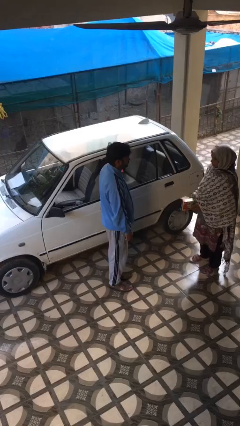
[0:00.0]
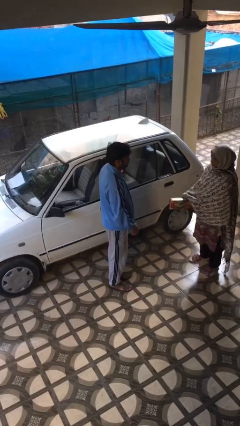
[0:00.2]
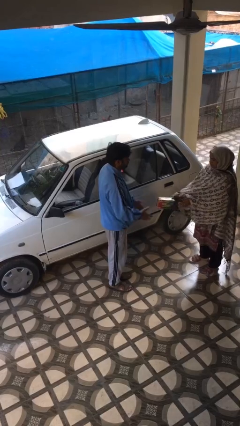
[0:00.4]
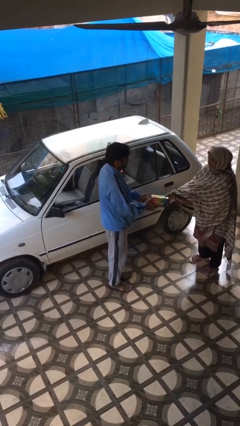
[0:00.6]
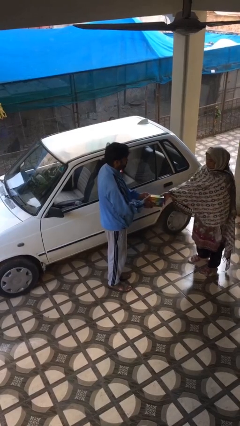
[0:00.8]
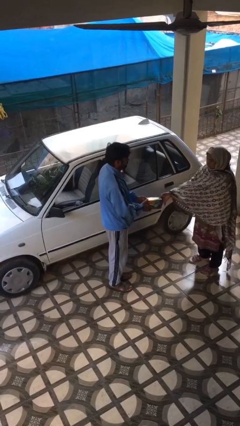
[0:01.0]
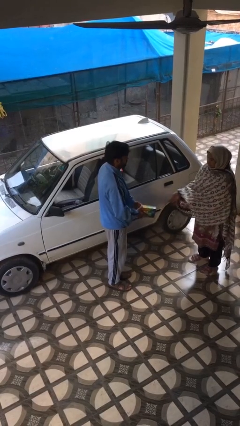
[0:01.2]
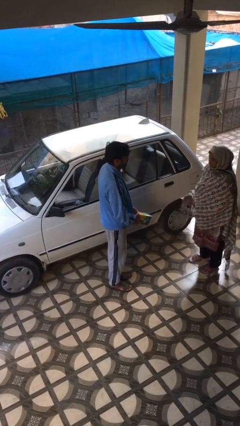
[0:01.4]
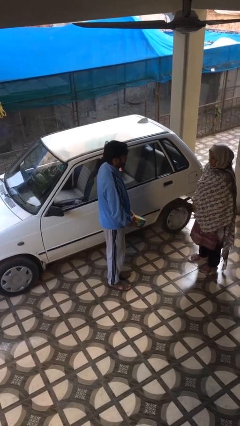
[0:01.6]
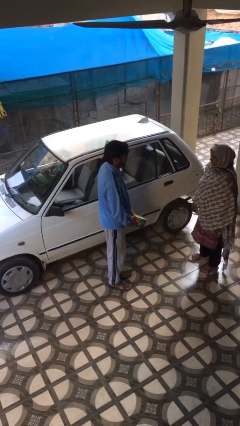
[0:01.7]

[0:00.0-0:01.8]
person transfers object to person

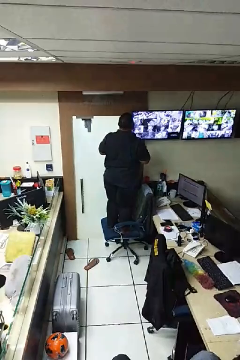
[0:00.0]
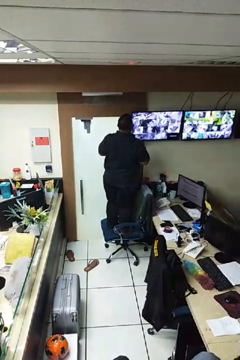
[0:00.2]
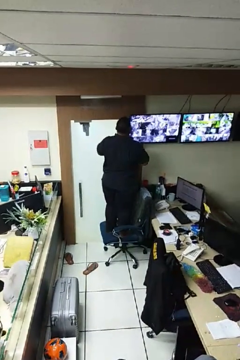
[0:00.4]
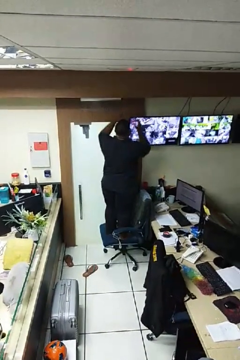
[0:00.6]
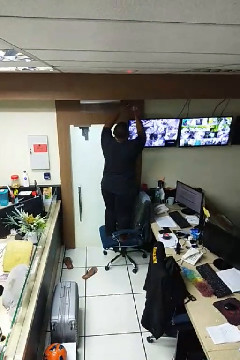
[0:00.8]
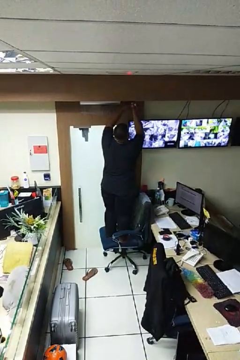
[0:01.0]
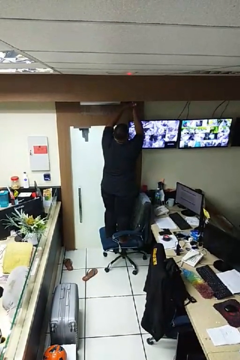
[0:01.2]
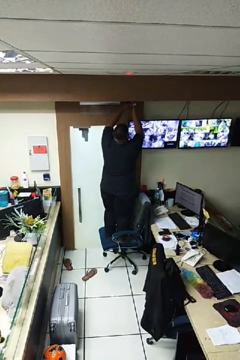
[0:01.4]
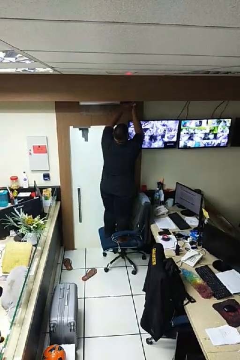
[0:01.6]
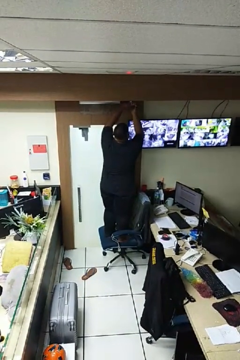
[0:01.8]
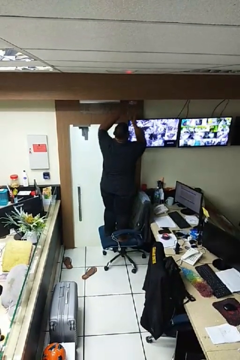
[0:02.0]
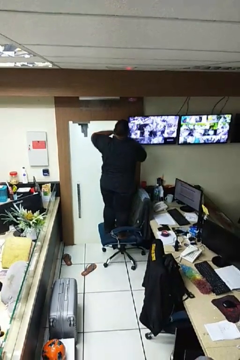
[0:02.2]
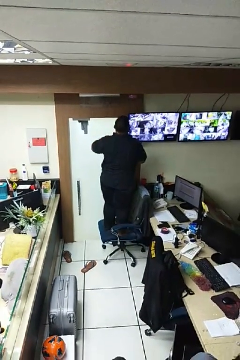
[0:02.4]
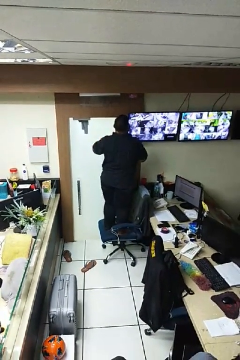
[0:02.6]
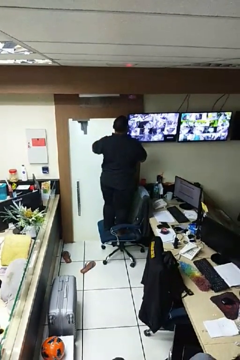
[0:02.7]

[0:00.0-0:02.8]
person puts up smoke detector

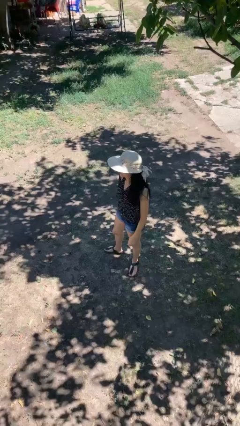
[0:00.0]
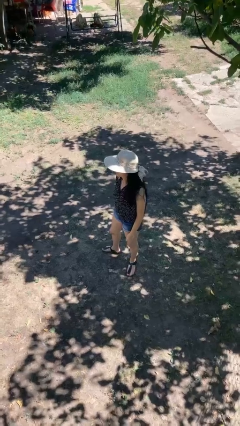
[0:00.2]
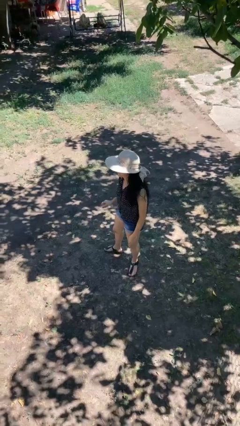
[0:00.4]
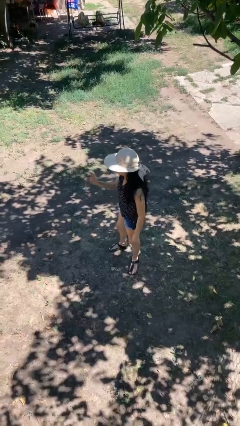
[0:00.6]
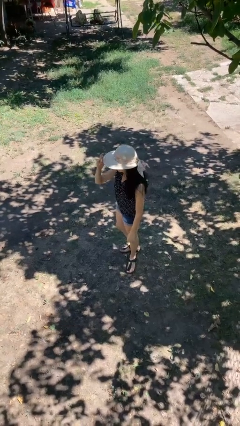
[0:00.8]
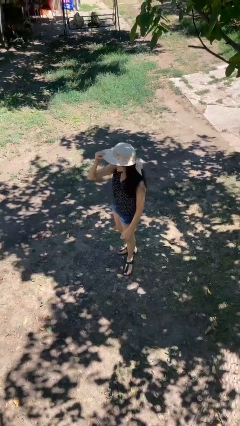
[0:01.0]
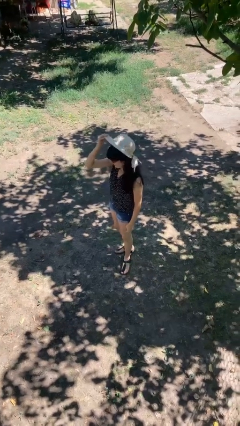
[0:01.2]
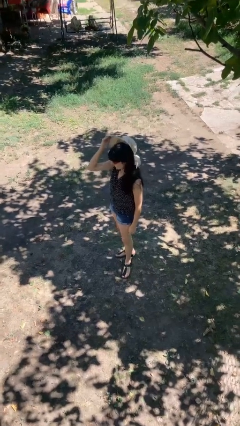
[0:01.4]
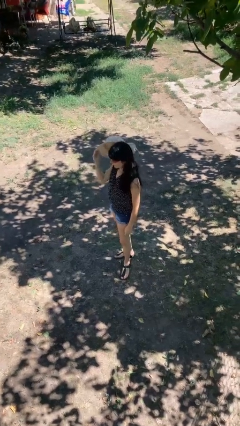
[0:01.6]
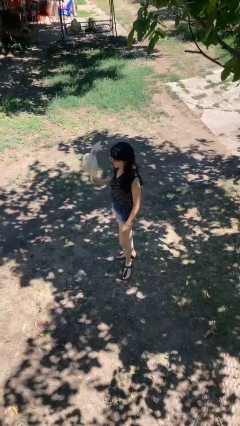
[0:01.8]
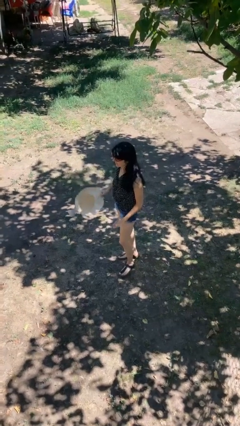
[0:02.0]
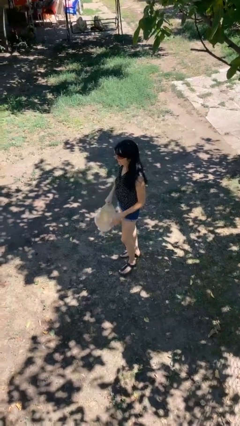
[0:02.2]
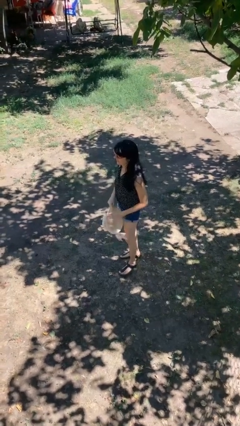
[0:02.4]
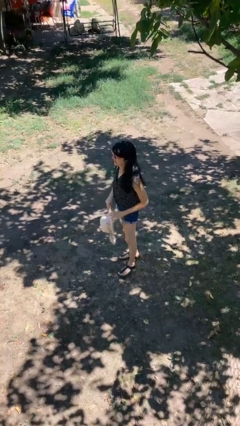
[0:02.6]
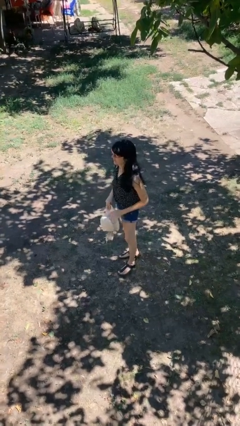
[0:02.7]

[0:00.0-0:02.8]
person takes off hat

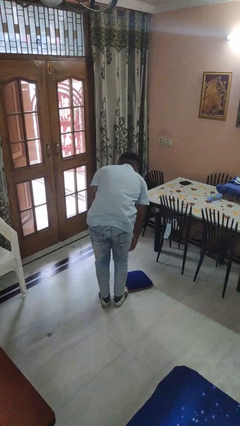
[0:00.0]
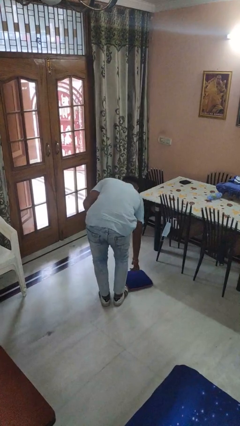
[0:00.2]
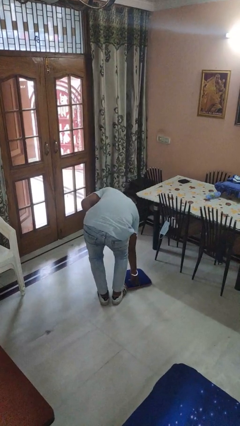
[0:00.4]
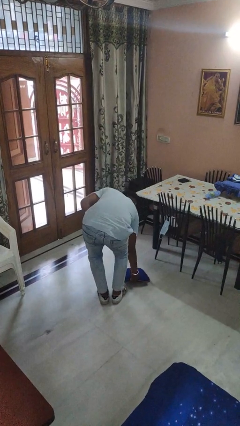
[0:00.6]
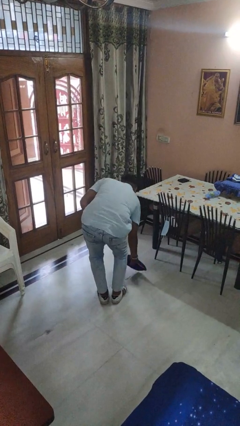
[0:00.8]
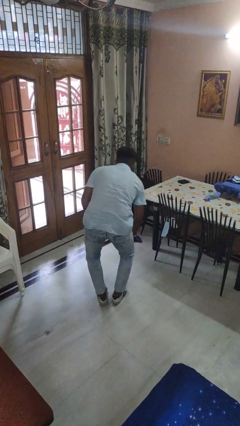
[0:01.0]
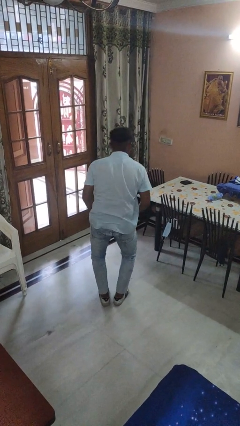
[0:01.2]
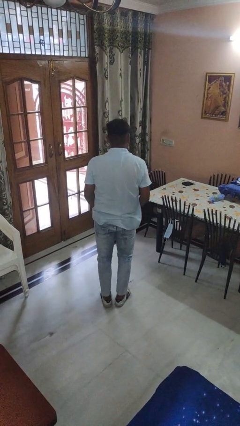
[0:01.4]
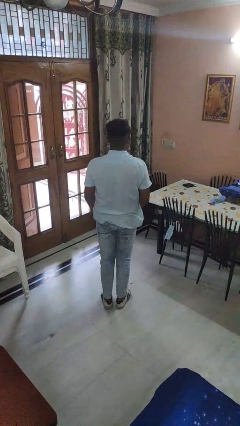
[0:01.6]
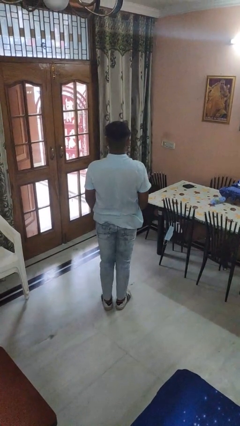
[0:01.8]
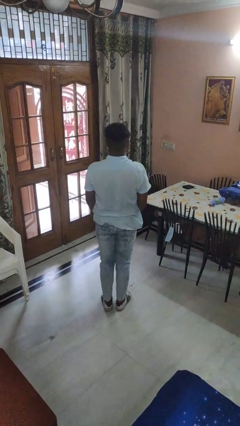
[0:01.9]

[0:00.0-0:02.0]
person picks up object from floor

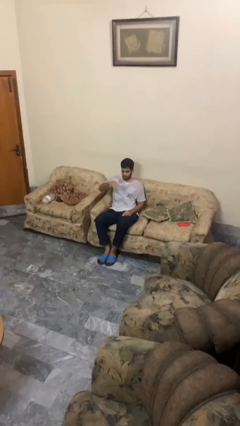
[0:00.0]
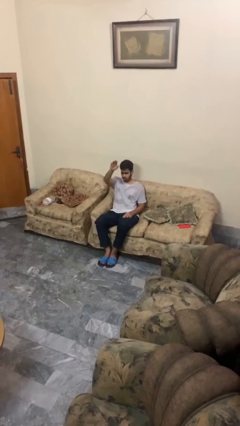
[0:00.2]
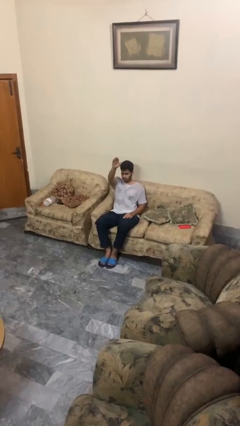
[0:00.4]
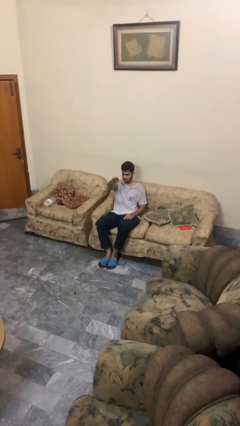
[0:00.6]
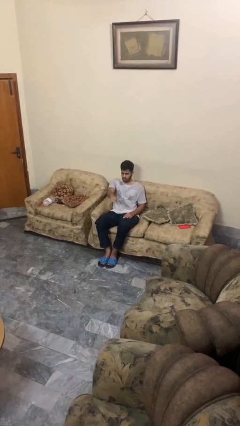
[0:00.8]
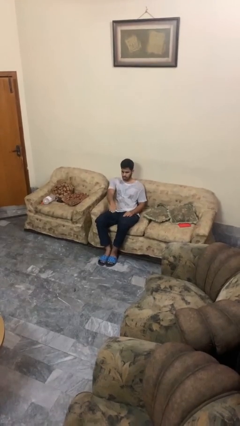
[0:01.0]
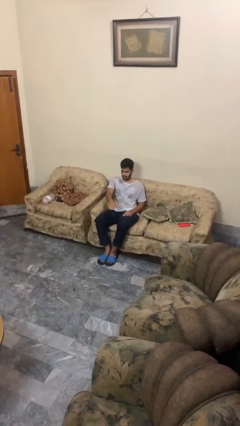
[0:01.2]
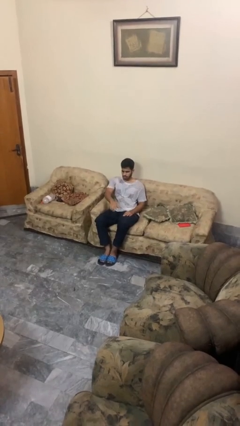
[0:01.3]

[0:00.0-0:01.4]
person gestures swipe down

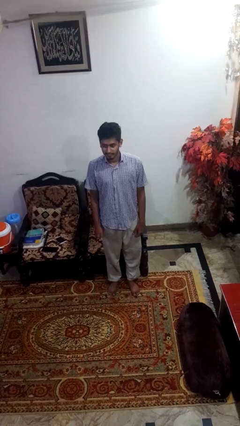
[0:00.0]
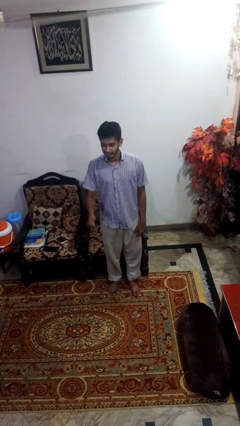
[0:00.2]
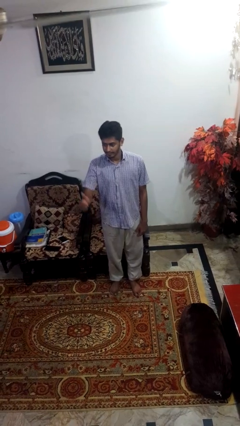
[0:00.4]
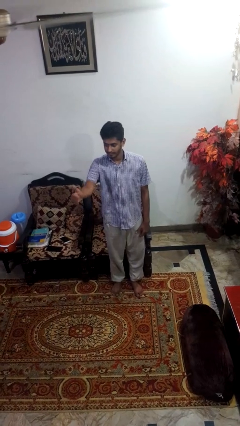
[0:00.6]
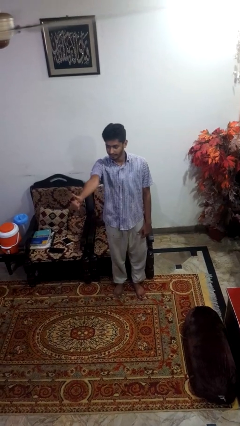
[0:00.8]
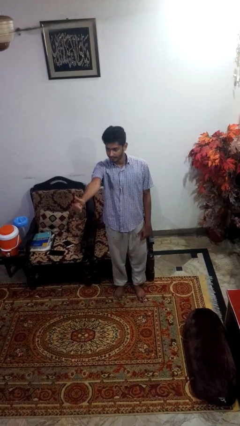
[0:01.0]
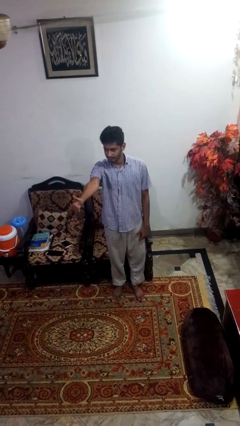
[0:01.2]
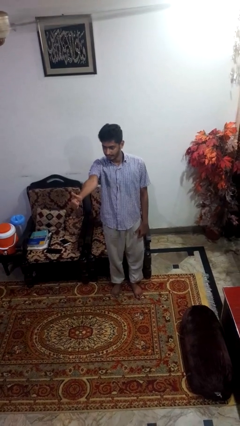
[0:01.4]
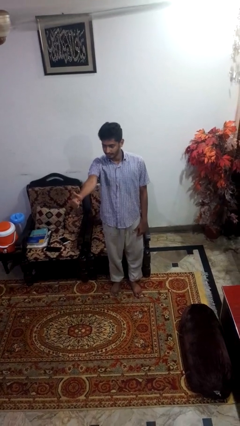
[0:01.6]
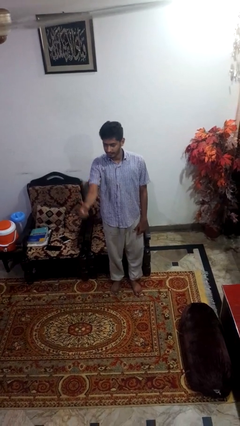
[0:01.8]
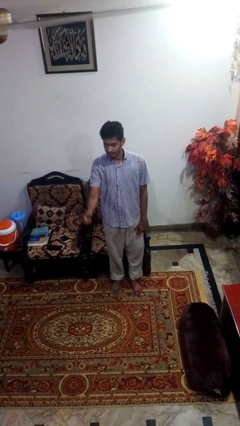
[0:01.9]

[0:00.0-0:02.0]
person gestures thumbs up

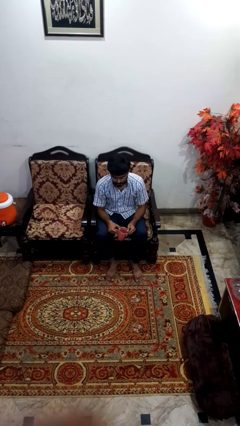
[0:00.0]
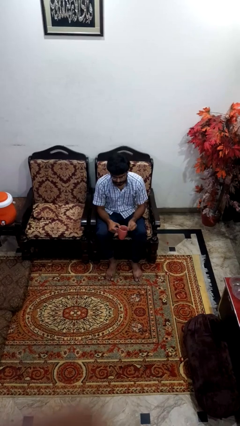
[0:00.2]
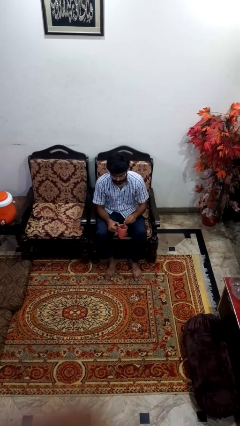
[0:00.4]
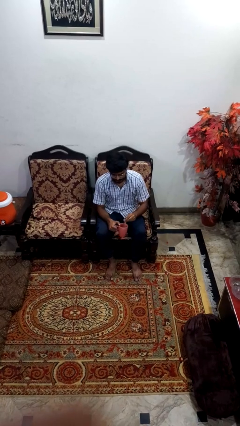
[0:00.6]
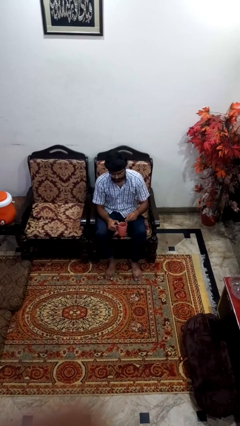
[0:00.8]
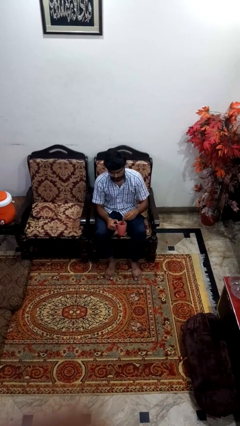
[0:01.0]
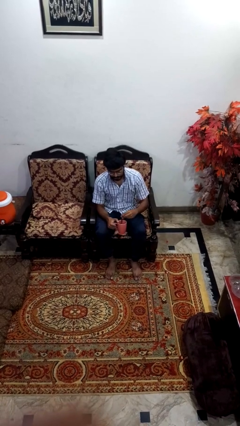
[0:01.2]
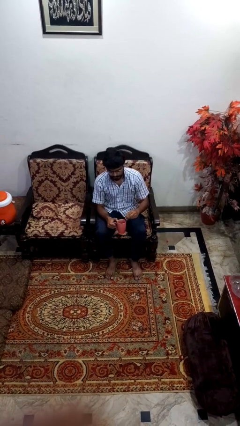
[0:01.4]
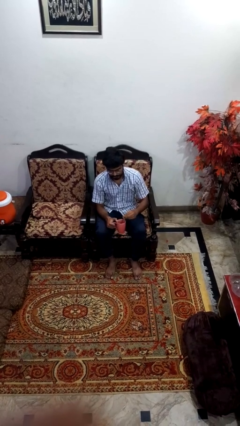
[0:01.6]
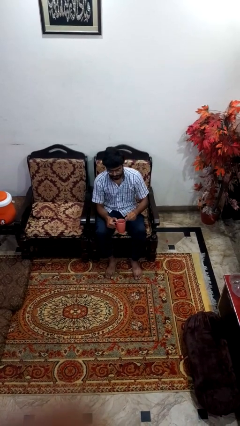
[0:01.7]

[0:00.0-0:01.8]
person stirs mug

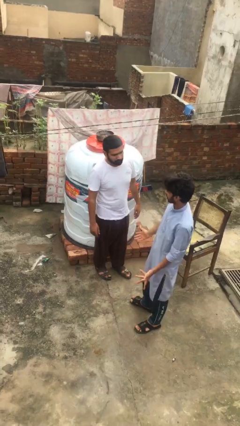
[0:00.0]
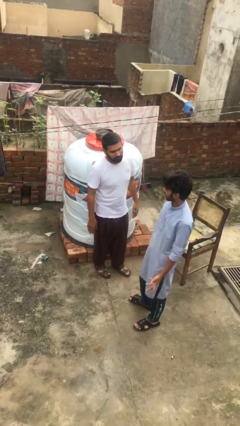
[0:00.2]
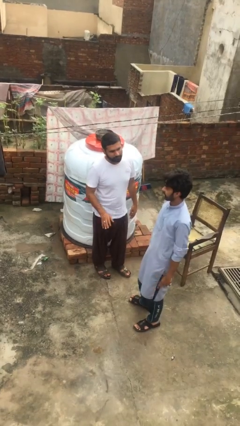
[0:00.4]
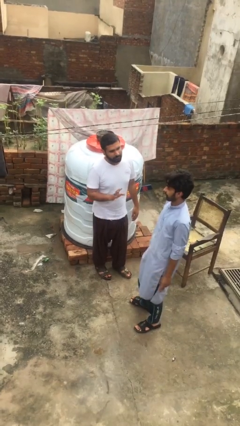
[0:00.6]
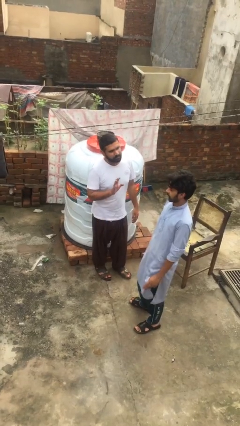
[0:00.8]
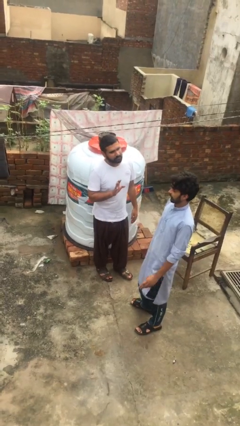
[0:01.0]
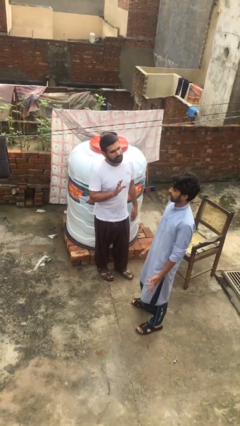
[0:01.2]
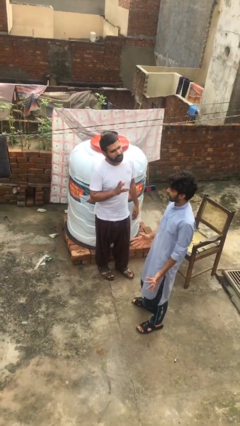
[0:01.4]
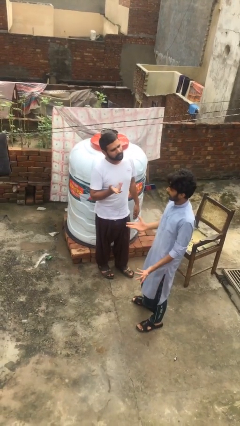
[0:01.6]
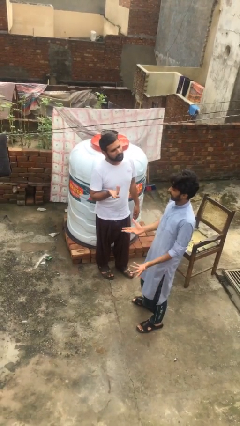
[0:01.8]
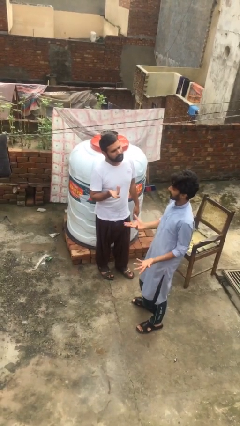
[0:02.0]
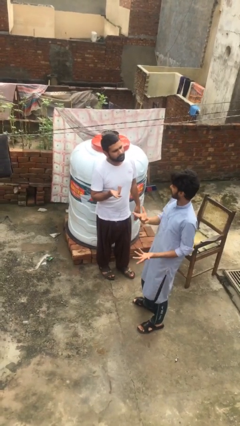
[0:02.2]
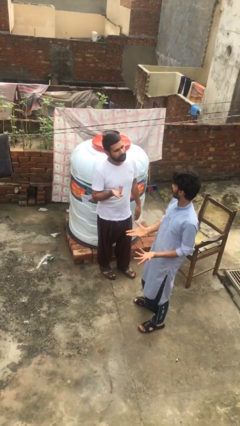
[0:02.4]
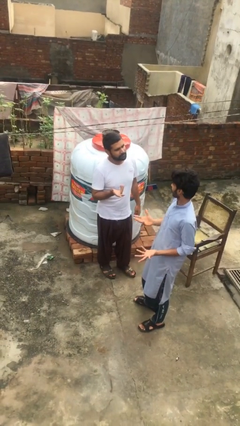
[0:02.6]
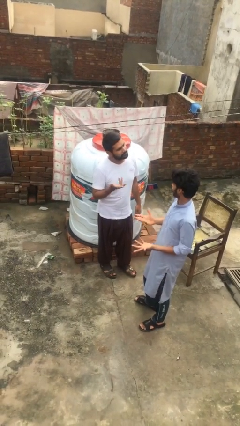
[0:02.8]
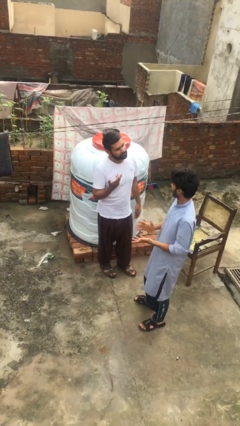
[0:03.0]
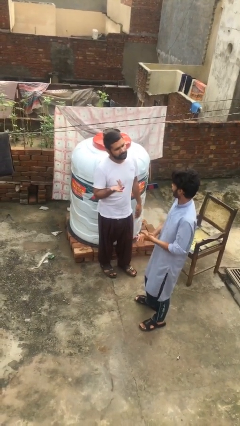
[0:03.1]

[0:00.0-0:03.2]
person talks to person
